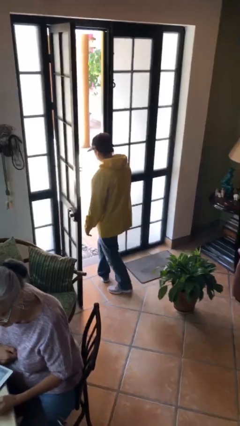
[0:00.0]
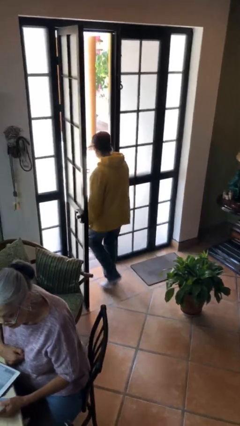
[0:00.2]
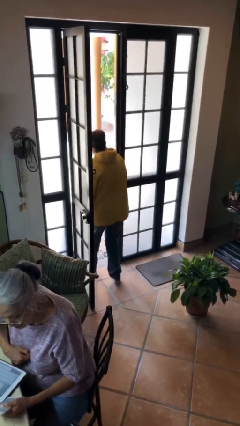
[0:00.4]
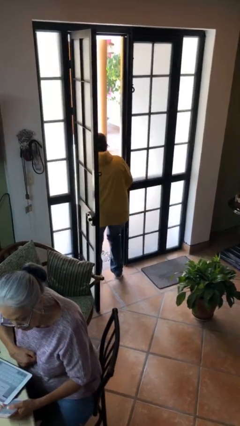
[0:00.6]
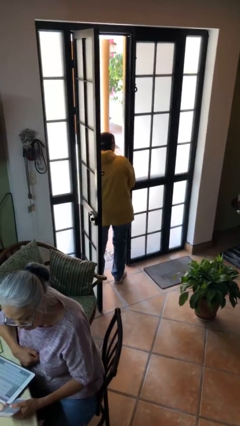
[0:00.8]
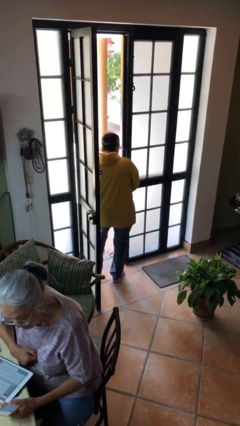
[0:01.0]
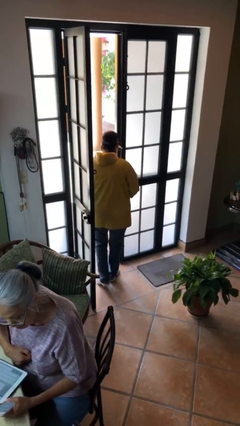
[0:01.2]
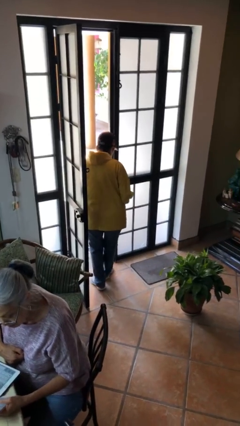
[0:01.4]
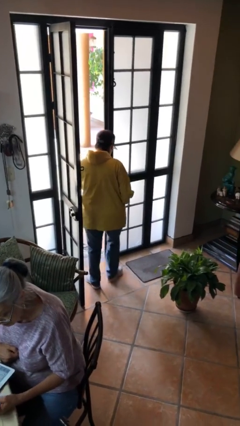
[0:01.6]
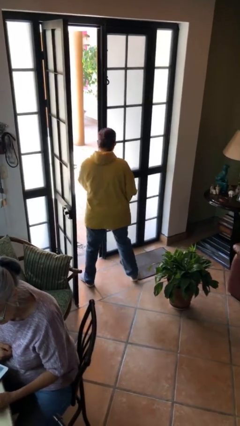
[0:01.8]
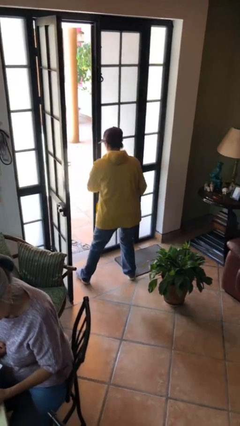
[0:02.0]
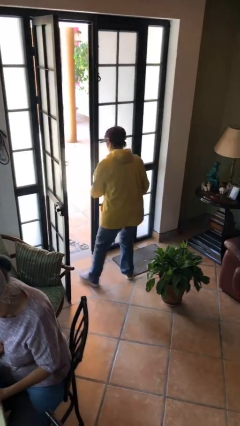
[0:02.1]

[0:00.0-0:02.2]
person bumps into wall

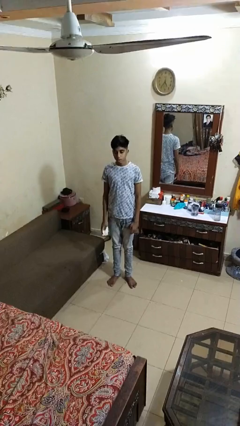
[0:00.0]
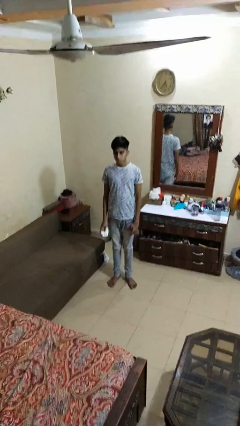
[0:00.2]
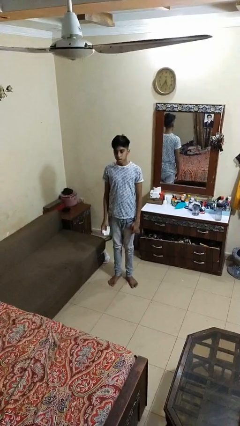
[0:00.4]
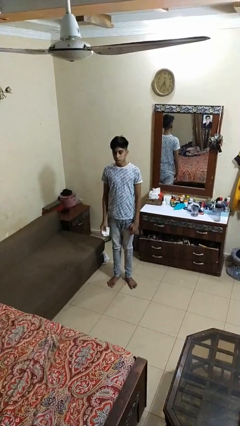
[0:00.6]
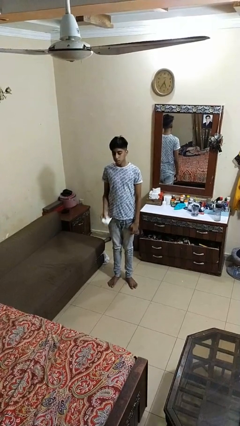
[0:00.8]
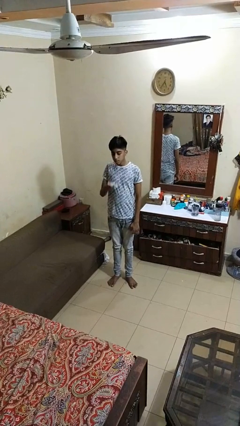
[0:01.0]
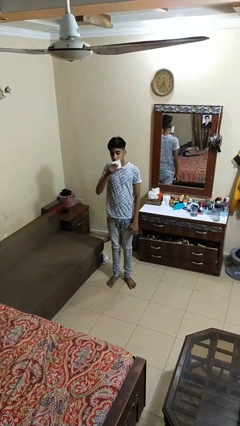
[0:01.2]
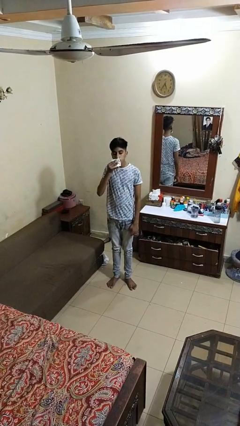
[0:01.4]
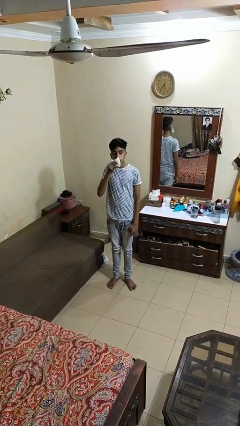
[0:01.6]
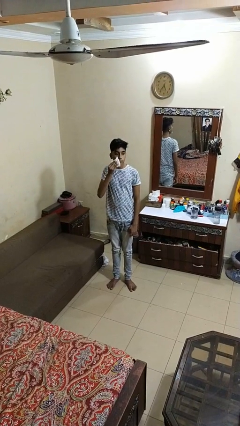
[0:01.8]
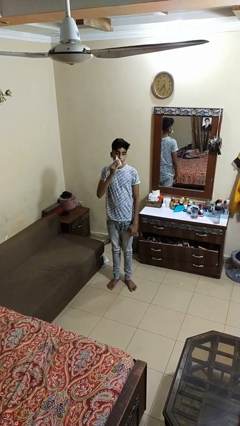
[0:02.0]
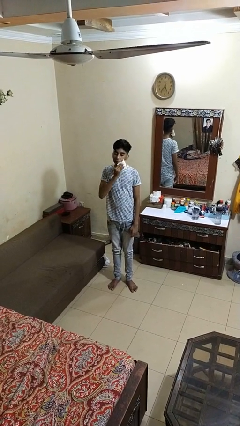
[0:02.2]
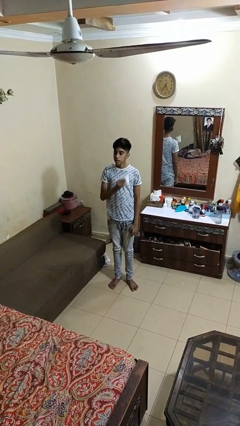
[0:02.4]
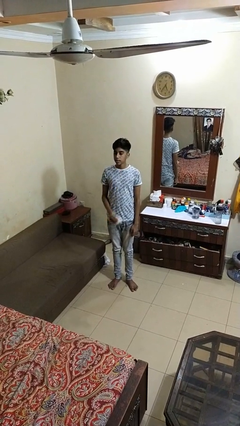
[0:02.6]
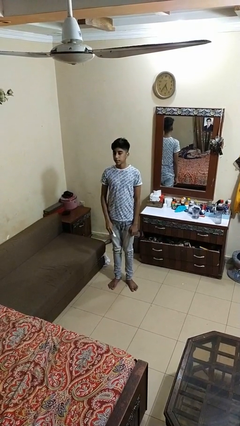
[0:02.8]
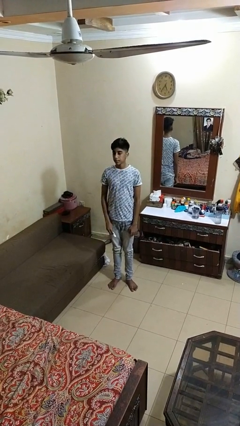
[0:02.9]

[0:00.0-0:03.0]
person wipes mouth with napkin

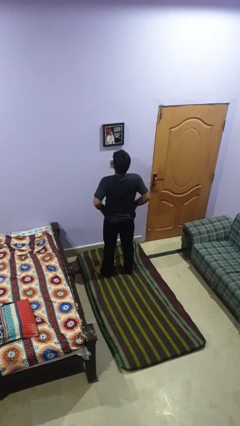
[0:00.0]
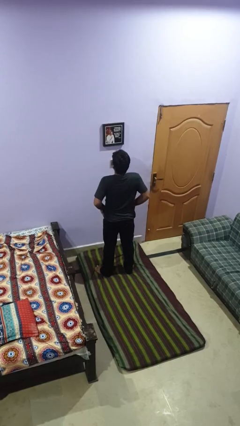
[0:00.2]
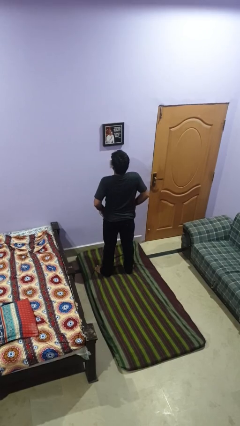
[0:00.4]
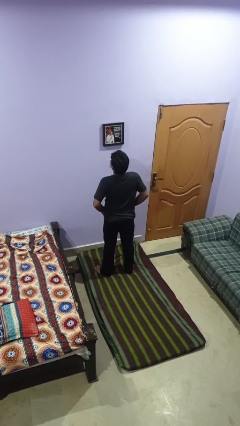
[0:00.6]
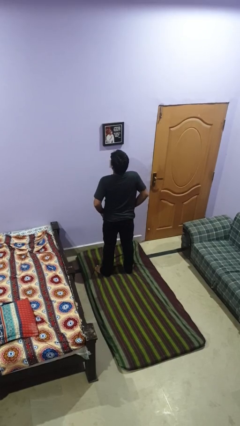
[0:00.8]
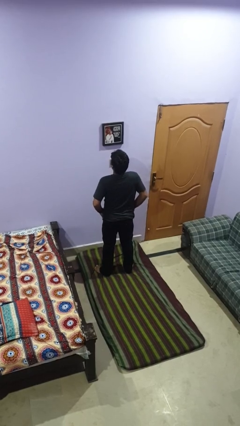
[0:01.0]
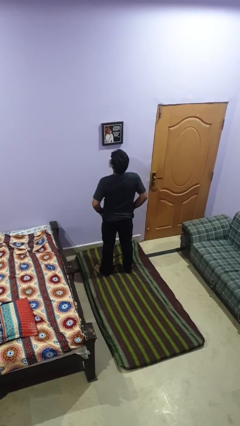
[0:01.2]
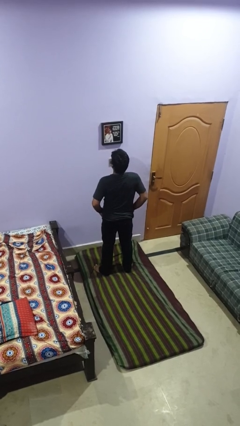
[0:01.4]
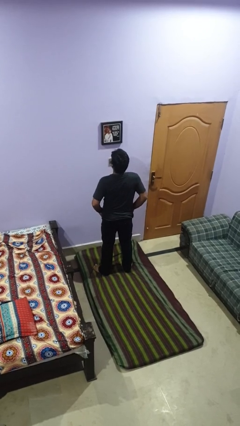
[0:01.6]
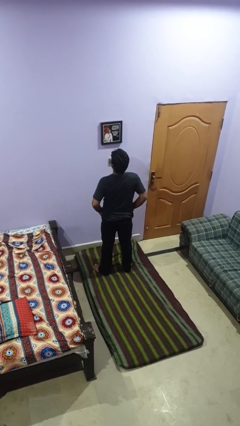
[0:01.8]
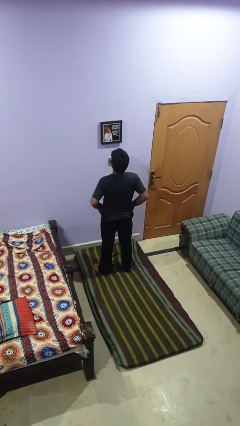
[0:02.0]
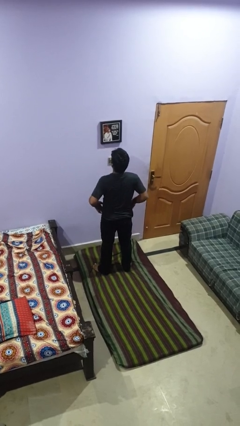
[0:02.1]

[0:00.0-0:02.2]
person puts hands in back pockets

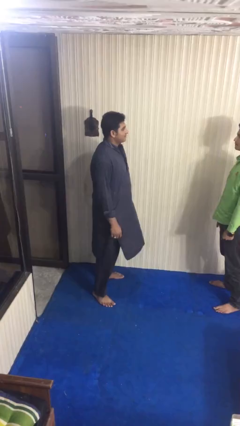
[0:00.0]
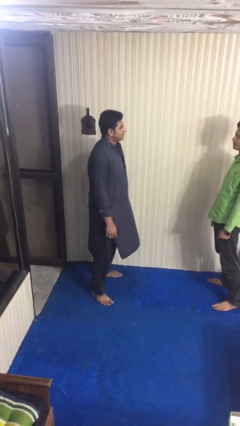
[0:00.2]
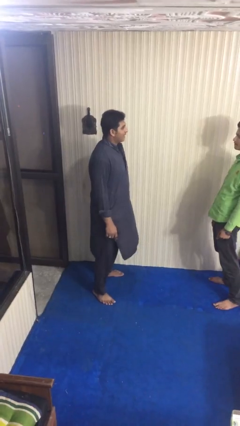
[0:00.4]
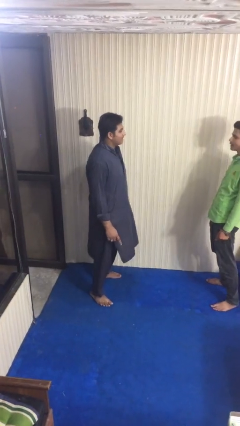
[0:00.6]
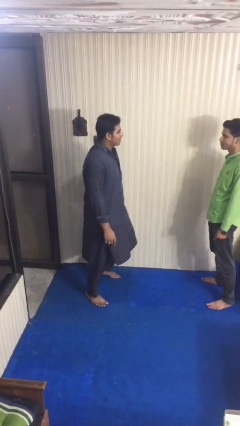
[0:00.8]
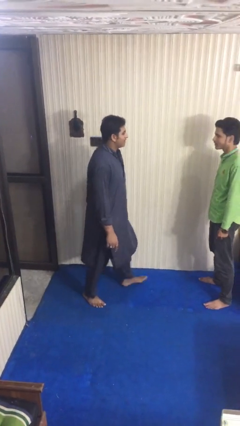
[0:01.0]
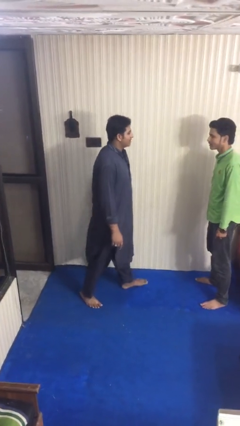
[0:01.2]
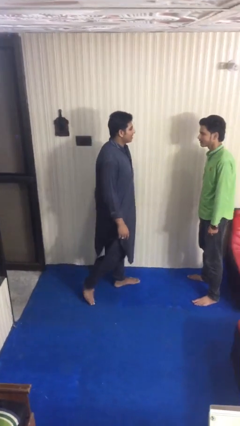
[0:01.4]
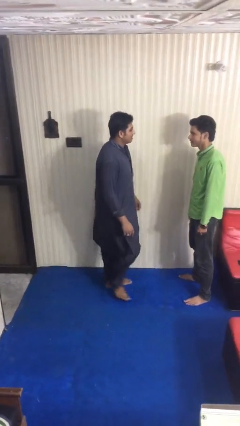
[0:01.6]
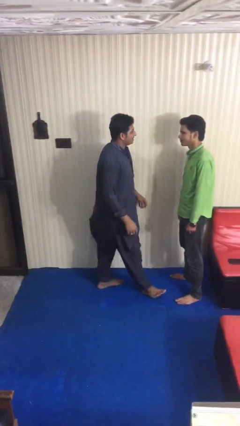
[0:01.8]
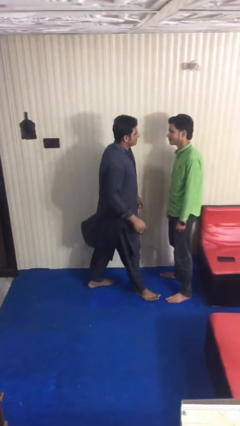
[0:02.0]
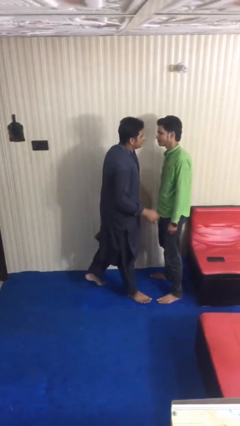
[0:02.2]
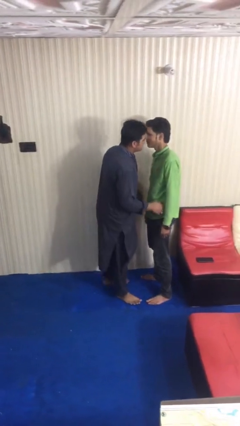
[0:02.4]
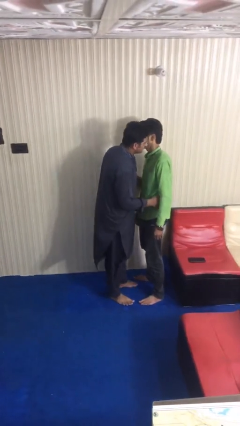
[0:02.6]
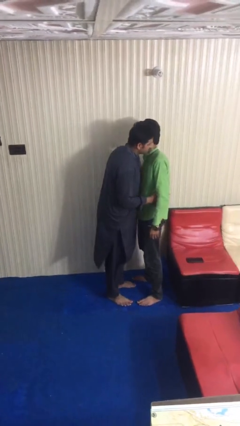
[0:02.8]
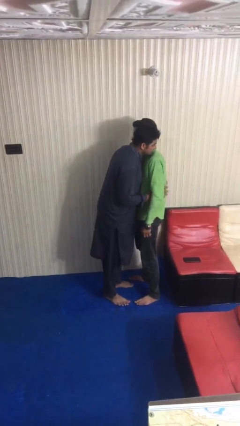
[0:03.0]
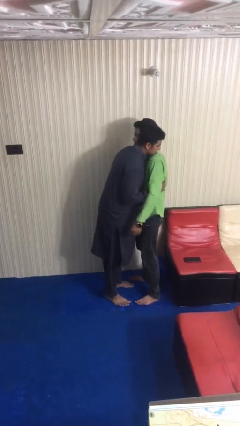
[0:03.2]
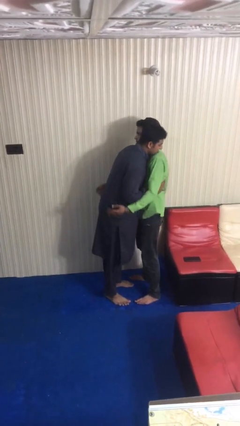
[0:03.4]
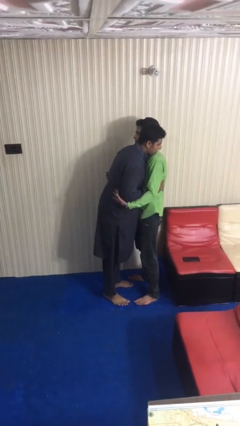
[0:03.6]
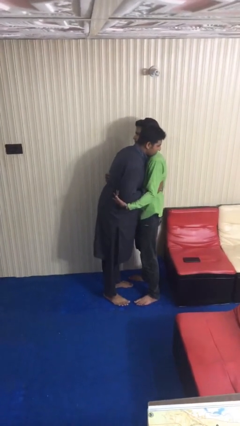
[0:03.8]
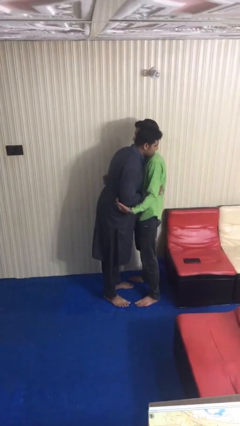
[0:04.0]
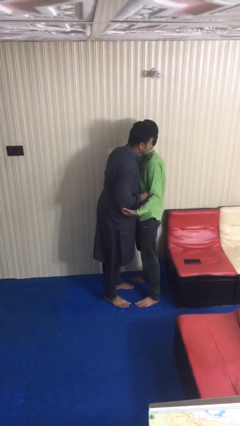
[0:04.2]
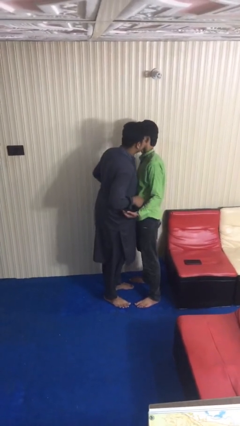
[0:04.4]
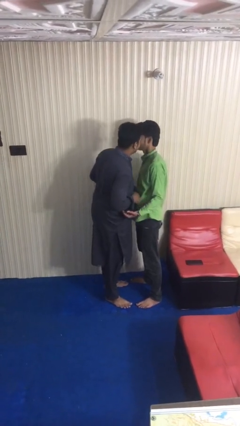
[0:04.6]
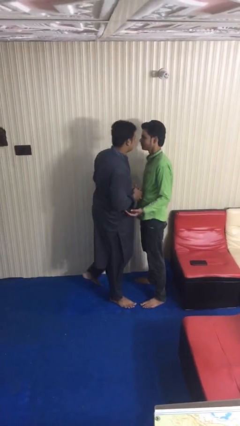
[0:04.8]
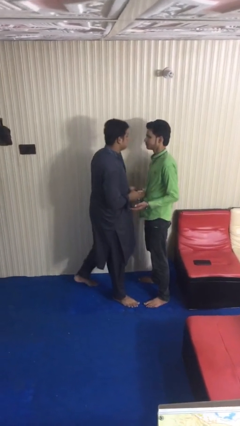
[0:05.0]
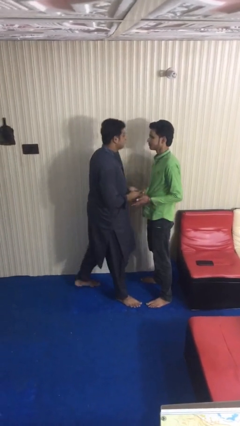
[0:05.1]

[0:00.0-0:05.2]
person embraces person

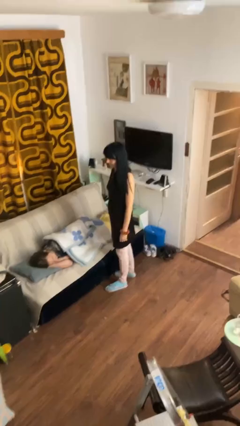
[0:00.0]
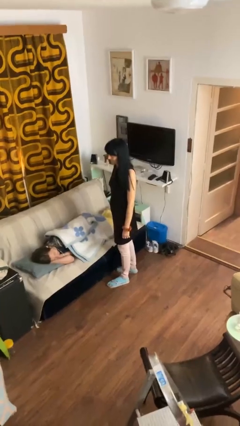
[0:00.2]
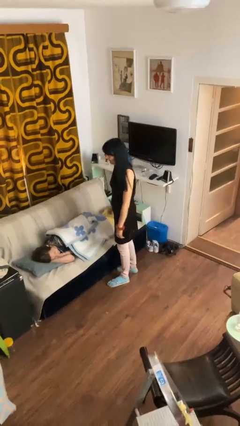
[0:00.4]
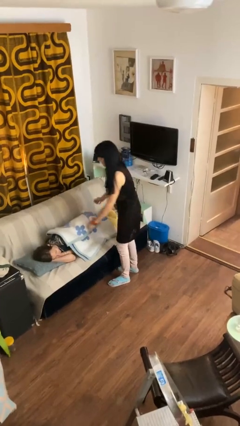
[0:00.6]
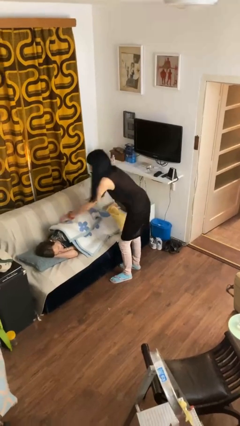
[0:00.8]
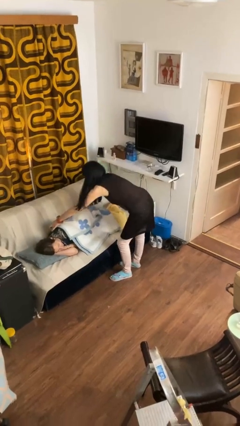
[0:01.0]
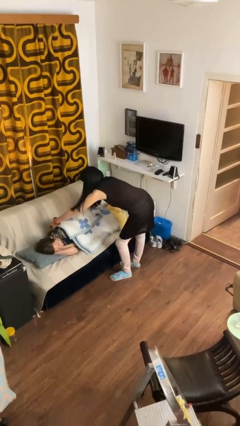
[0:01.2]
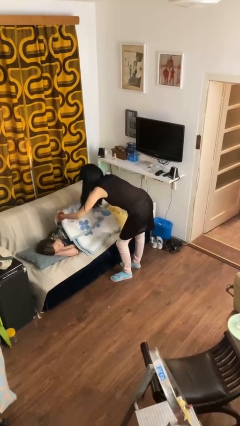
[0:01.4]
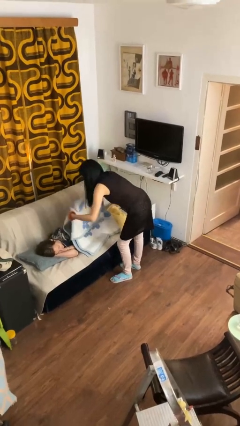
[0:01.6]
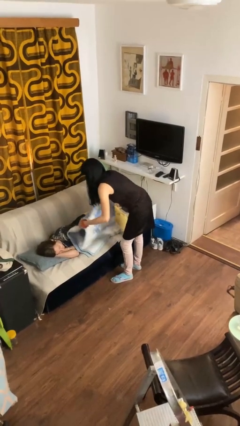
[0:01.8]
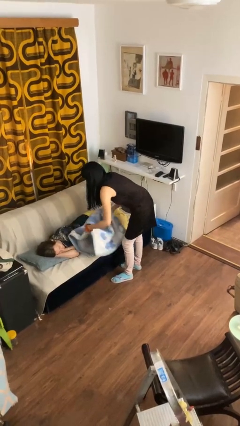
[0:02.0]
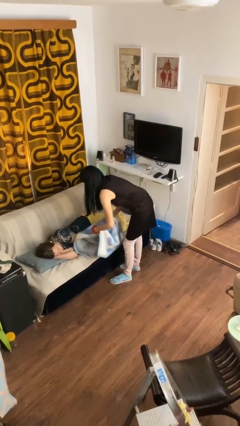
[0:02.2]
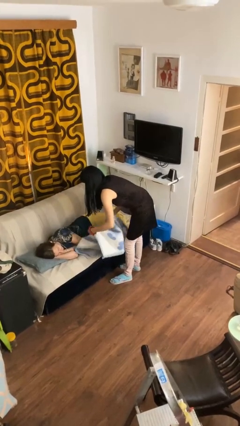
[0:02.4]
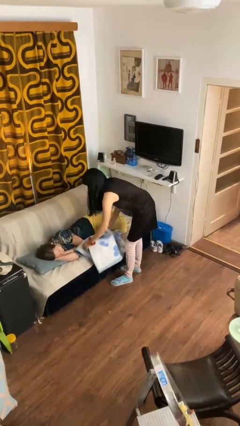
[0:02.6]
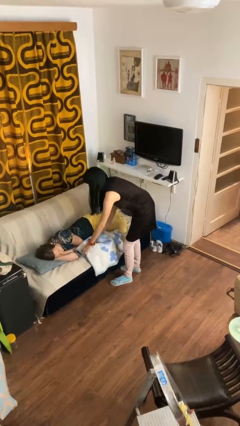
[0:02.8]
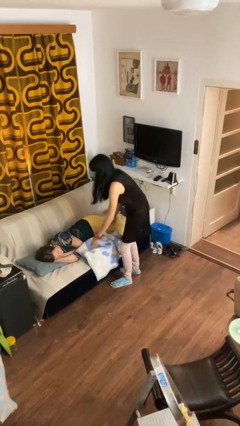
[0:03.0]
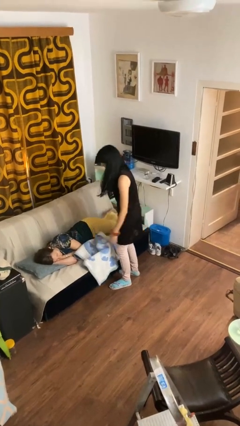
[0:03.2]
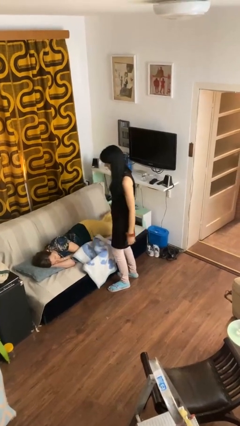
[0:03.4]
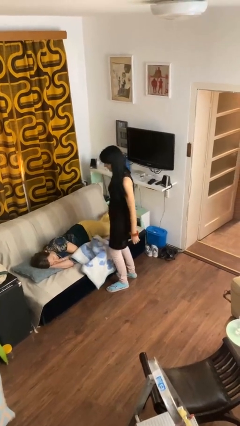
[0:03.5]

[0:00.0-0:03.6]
person uncovers friend with blanket

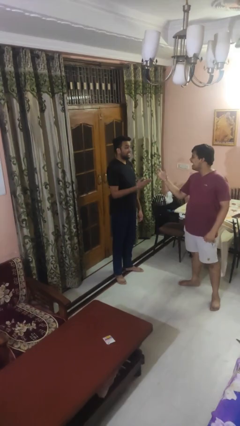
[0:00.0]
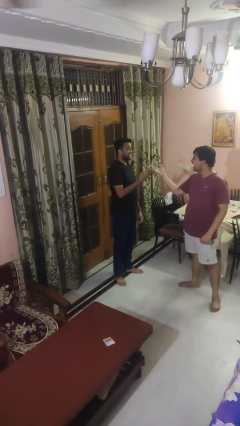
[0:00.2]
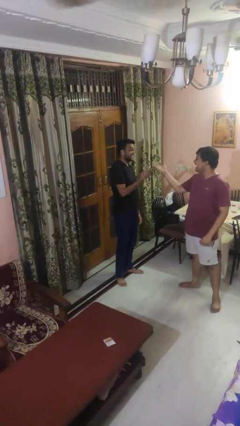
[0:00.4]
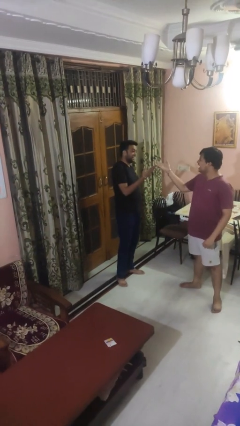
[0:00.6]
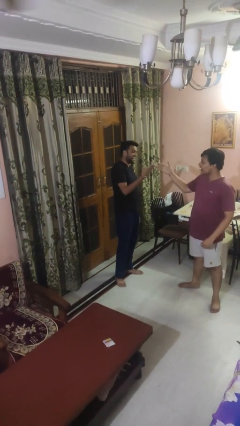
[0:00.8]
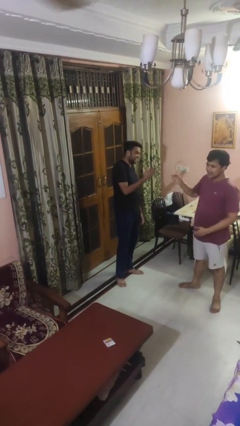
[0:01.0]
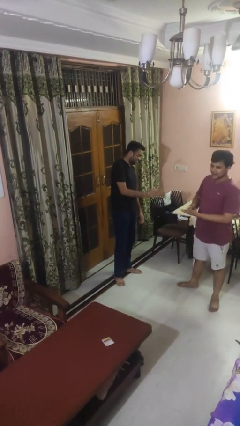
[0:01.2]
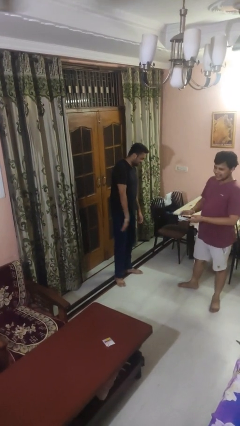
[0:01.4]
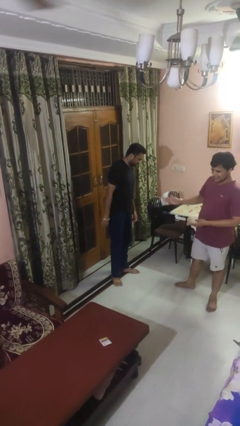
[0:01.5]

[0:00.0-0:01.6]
person laughs with person
